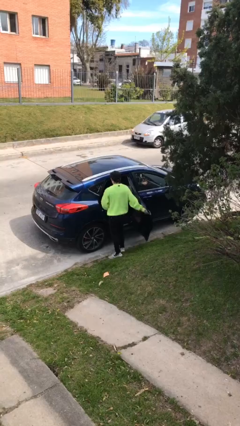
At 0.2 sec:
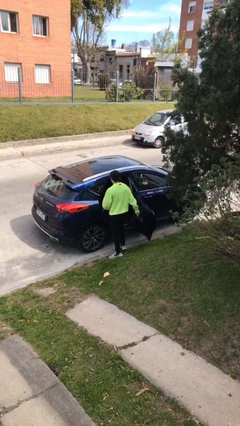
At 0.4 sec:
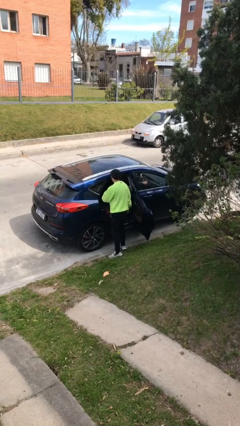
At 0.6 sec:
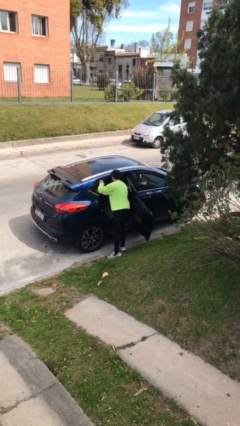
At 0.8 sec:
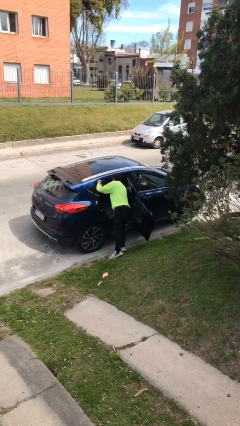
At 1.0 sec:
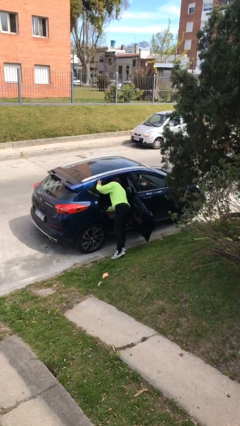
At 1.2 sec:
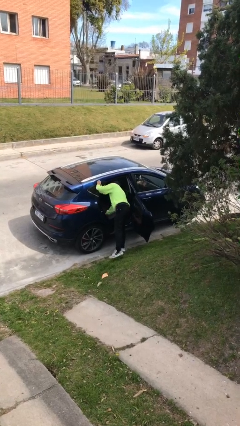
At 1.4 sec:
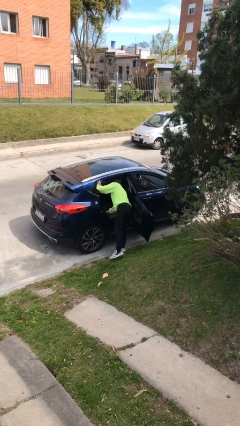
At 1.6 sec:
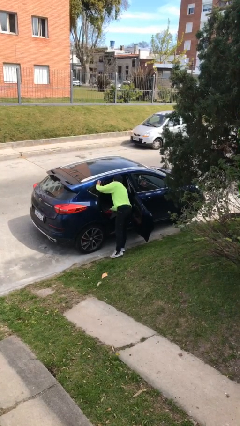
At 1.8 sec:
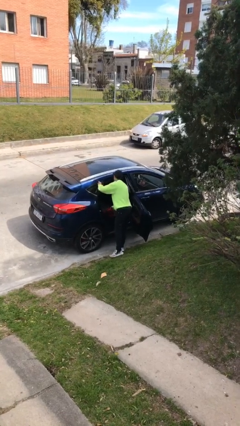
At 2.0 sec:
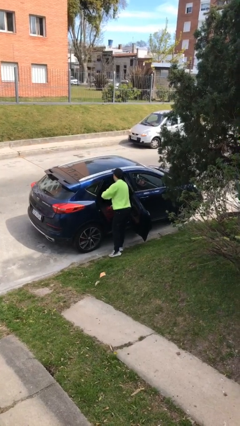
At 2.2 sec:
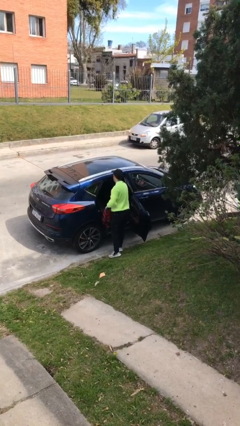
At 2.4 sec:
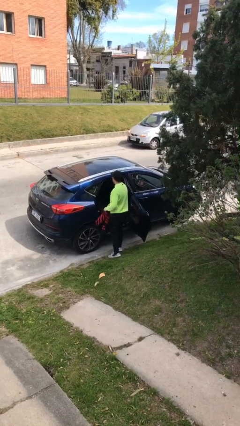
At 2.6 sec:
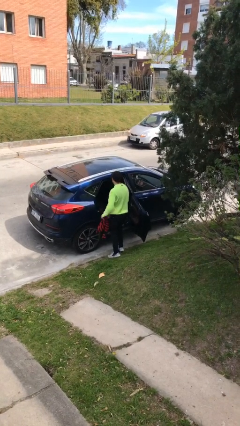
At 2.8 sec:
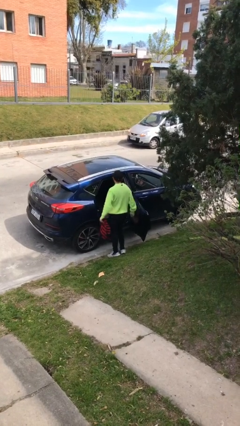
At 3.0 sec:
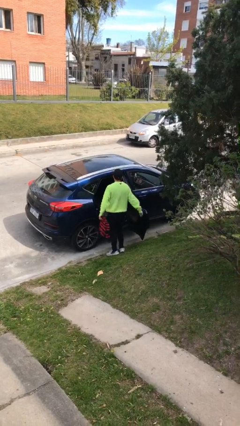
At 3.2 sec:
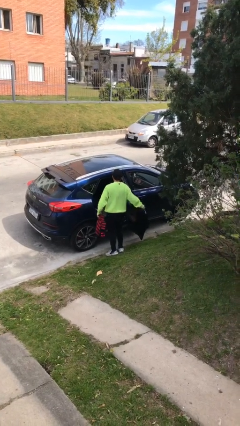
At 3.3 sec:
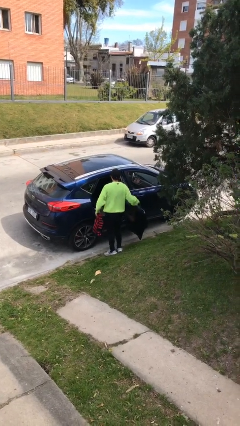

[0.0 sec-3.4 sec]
person unloads car

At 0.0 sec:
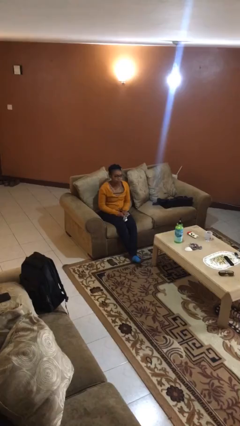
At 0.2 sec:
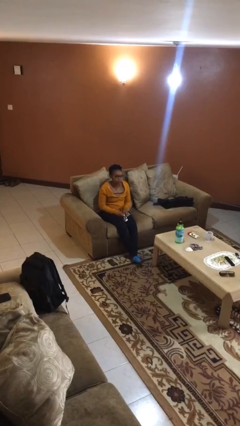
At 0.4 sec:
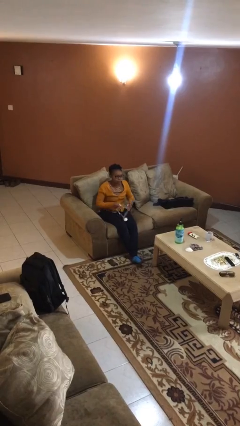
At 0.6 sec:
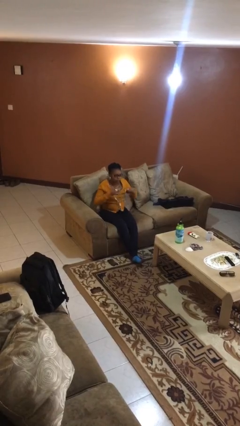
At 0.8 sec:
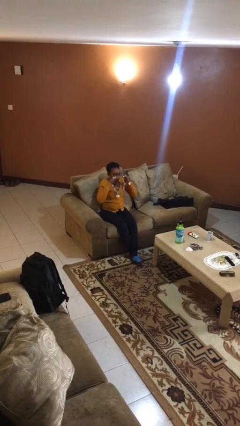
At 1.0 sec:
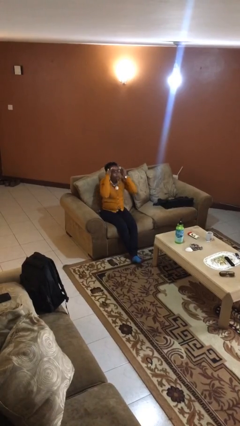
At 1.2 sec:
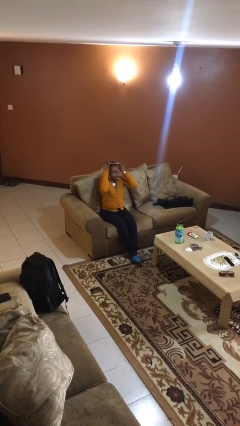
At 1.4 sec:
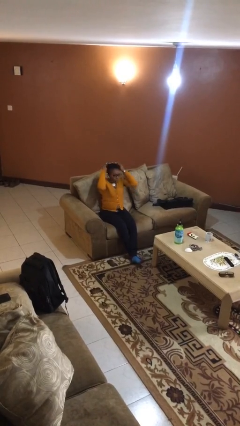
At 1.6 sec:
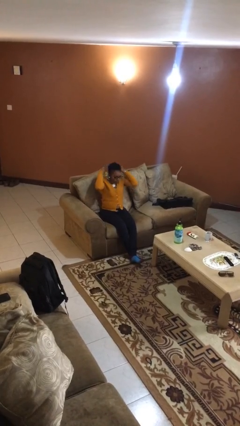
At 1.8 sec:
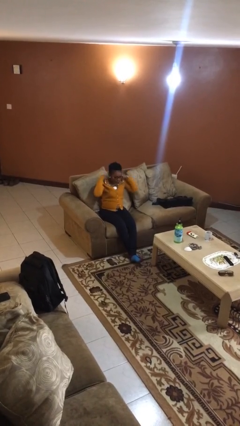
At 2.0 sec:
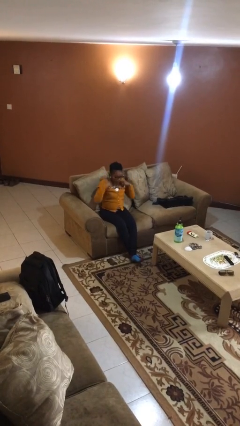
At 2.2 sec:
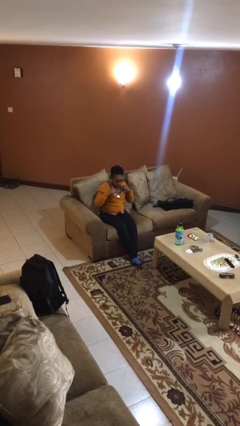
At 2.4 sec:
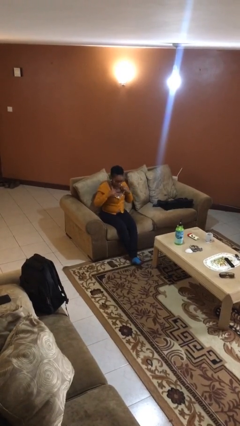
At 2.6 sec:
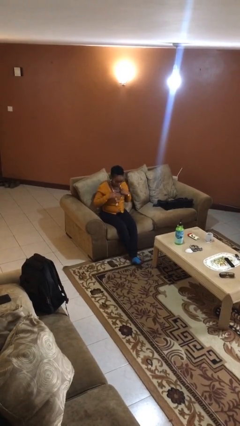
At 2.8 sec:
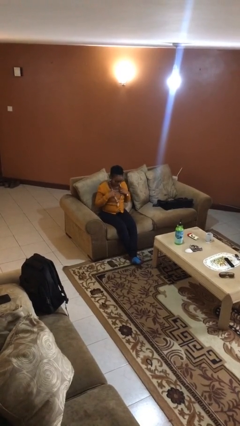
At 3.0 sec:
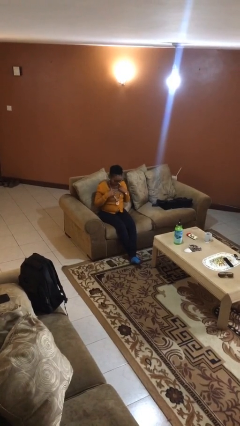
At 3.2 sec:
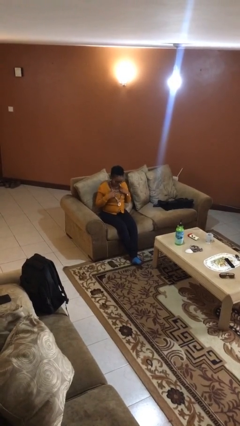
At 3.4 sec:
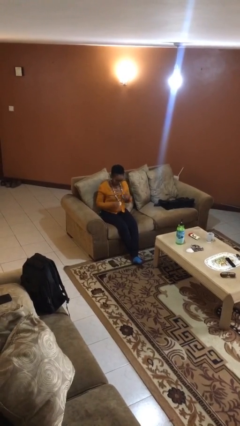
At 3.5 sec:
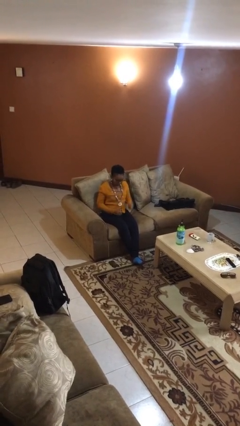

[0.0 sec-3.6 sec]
person puts on necklace

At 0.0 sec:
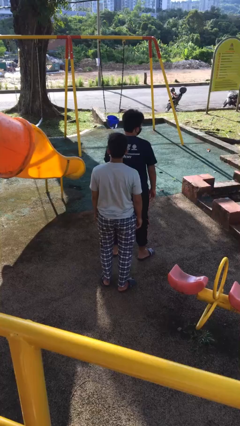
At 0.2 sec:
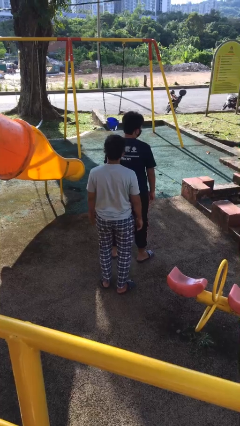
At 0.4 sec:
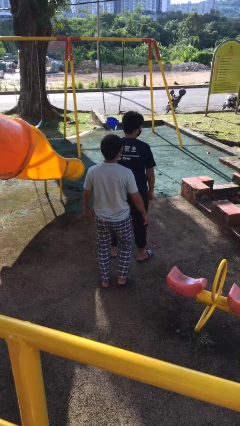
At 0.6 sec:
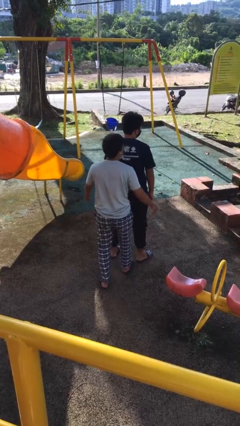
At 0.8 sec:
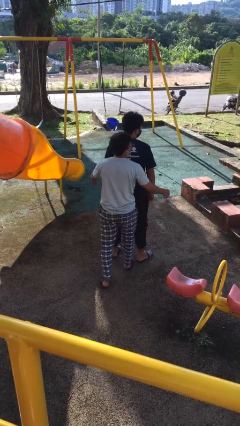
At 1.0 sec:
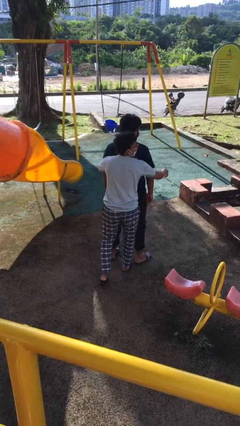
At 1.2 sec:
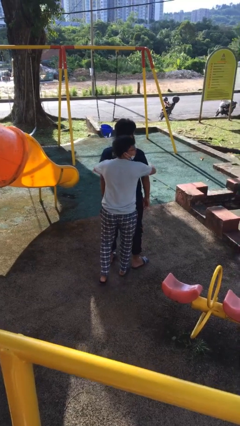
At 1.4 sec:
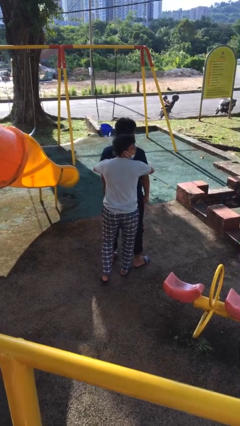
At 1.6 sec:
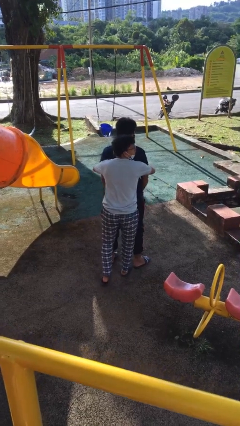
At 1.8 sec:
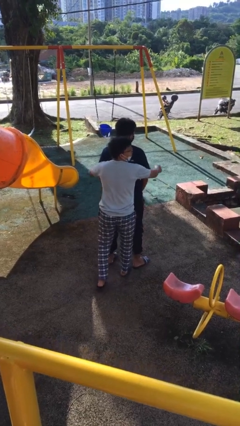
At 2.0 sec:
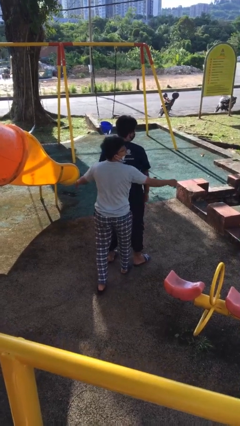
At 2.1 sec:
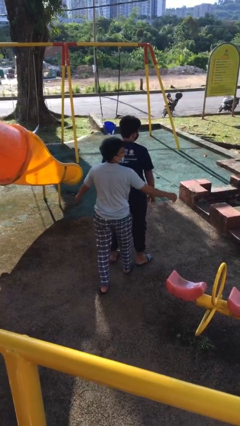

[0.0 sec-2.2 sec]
person hugs person from behind

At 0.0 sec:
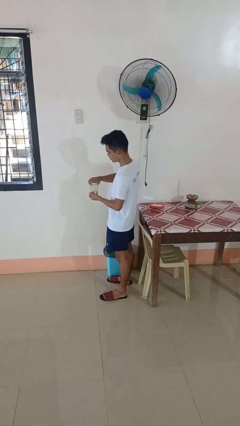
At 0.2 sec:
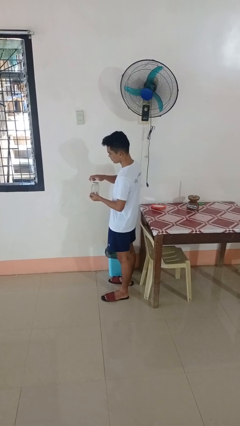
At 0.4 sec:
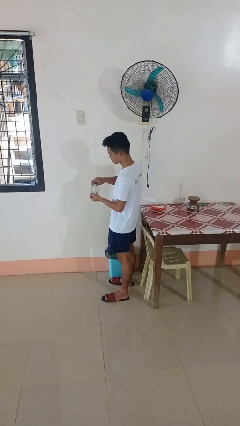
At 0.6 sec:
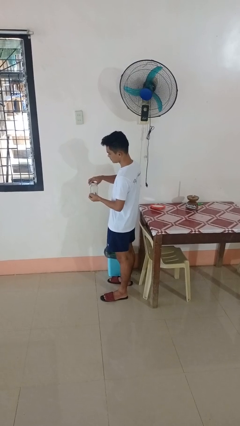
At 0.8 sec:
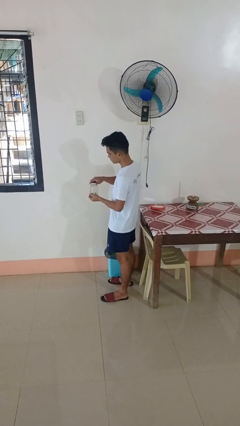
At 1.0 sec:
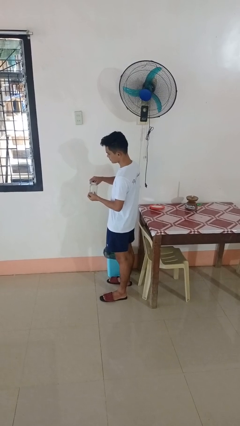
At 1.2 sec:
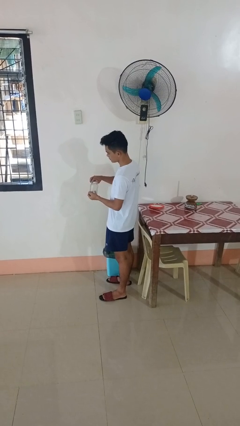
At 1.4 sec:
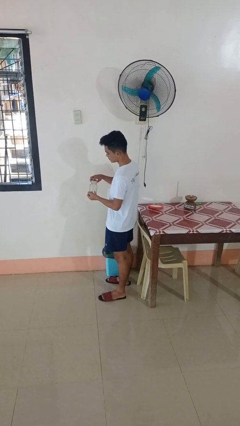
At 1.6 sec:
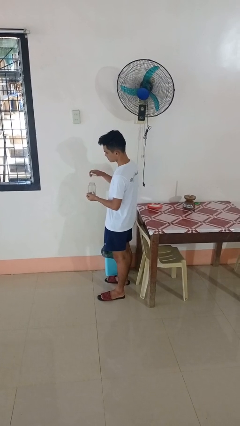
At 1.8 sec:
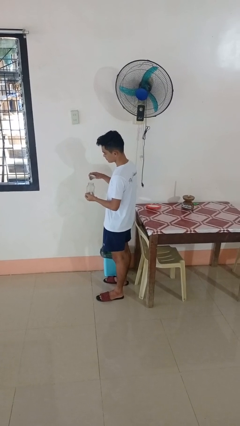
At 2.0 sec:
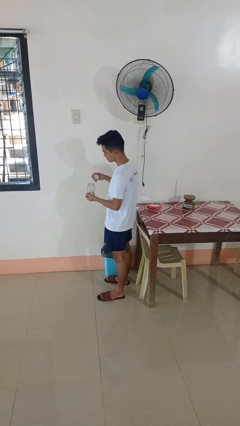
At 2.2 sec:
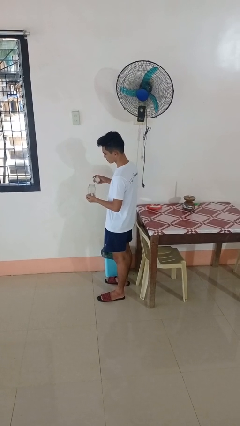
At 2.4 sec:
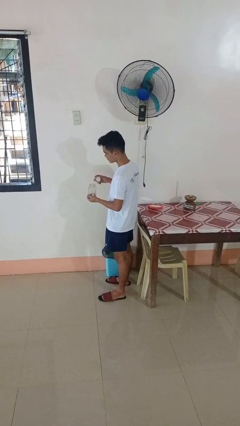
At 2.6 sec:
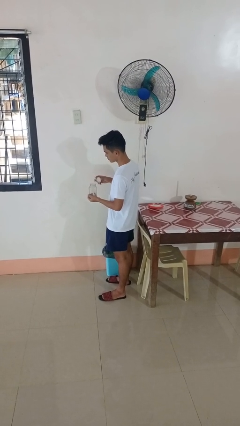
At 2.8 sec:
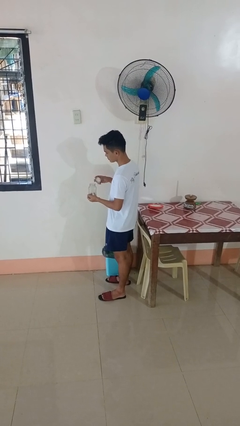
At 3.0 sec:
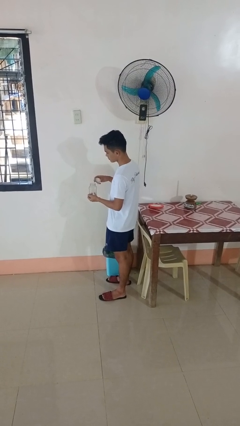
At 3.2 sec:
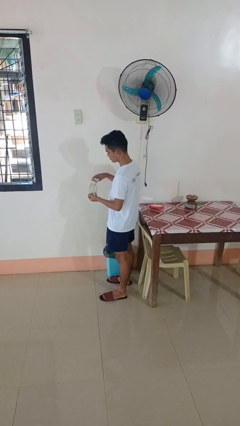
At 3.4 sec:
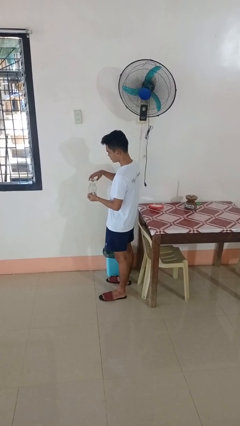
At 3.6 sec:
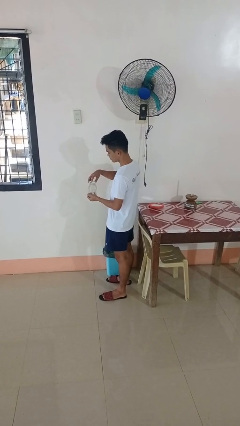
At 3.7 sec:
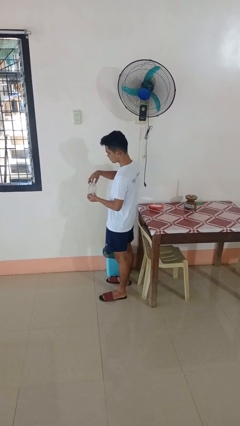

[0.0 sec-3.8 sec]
person opens jar

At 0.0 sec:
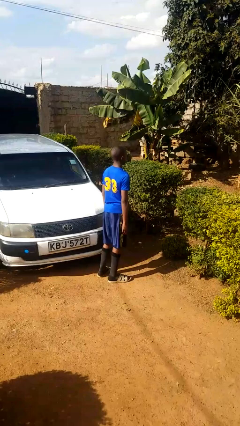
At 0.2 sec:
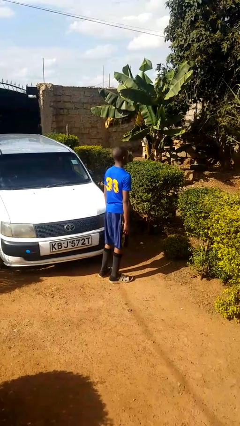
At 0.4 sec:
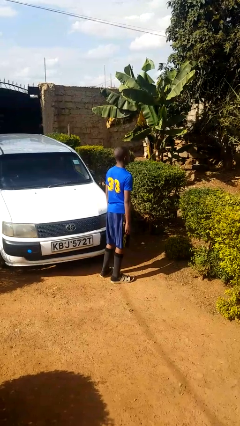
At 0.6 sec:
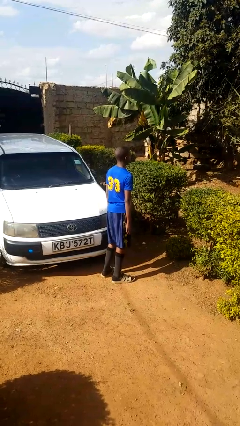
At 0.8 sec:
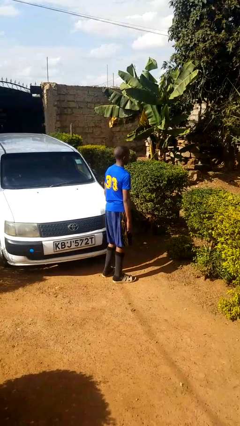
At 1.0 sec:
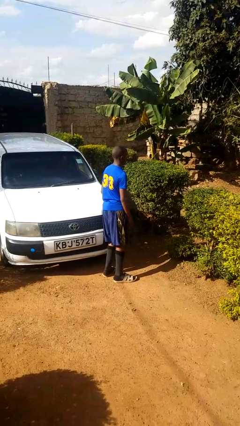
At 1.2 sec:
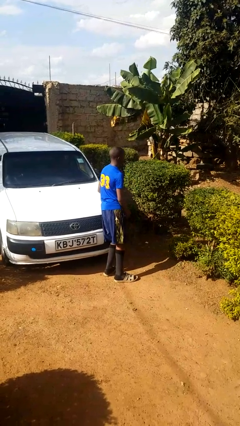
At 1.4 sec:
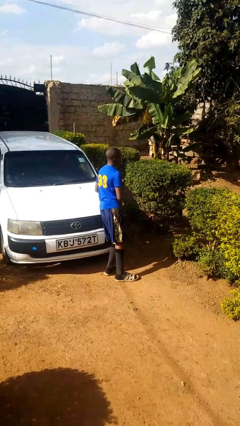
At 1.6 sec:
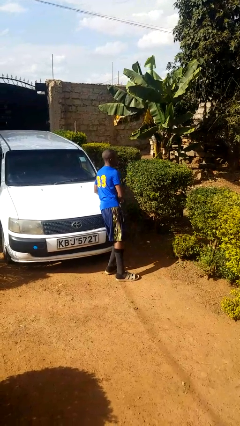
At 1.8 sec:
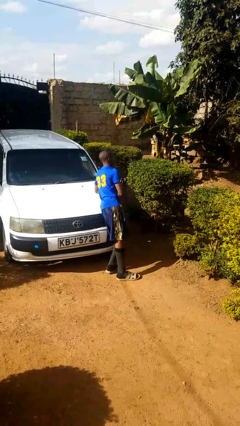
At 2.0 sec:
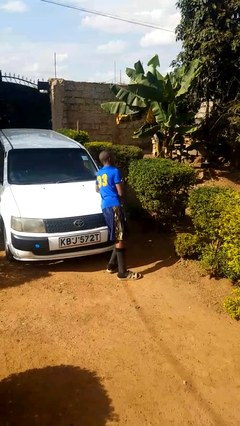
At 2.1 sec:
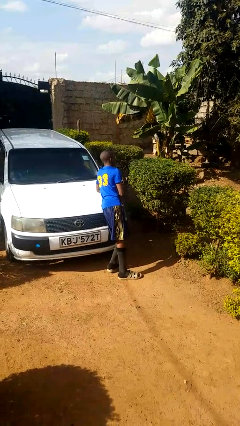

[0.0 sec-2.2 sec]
person leans against car

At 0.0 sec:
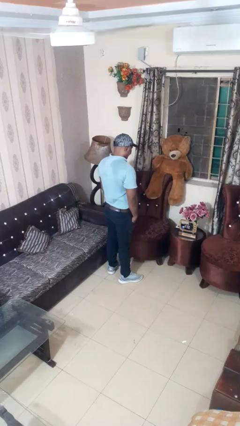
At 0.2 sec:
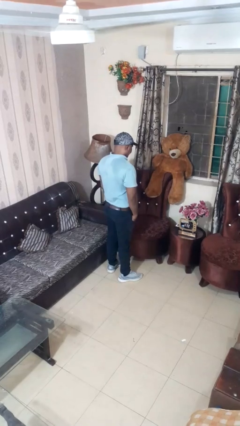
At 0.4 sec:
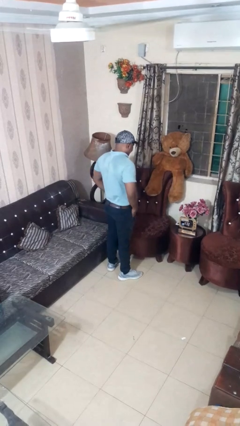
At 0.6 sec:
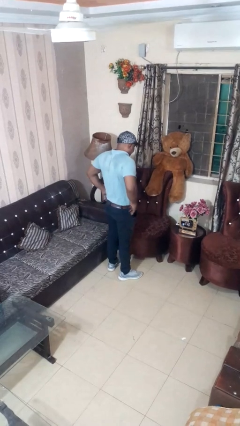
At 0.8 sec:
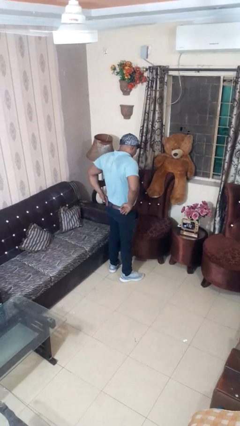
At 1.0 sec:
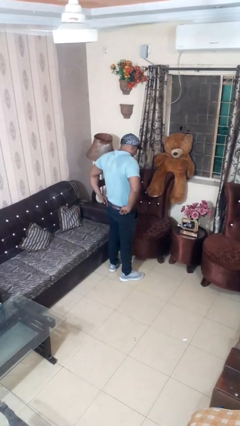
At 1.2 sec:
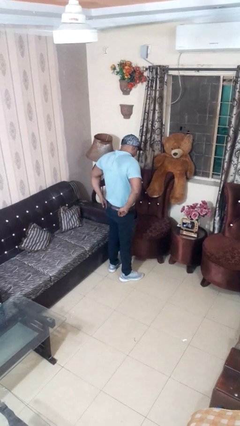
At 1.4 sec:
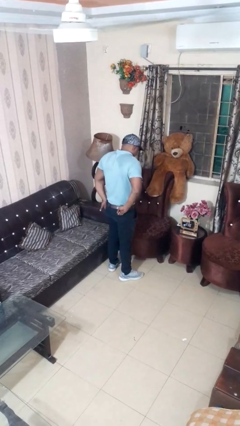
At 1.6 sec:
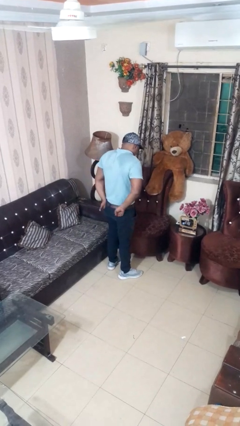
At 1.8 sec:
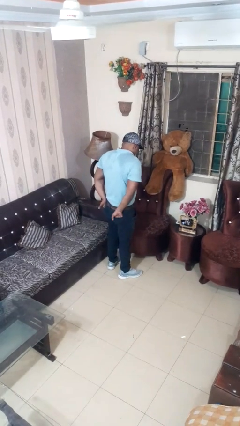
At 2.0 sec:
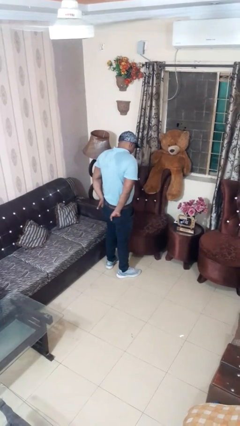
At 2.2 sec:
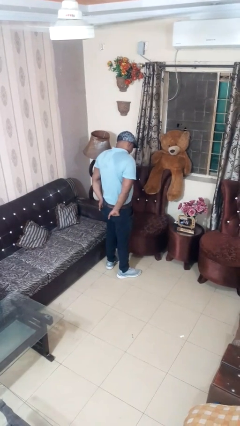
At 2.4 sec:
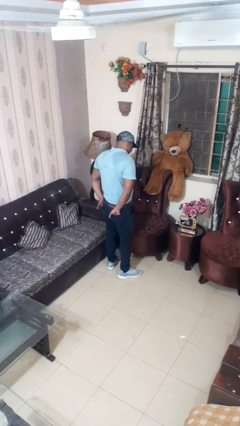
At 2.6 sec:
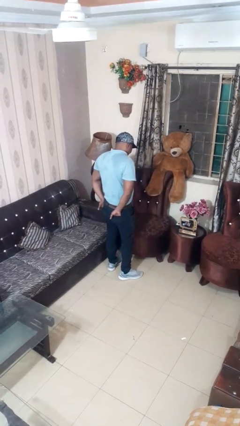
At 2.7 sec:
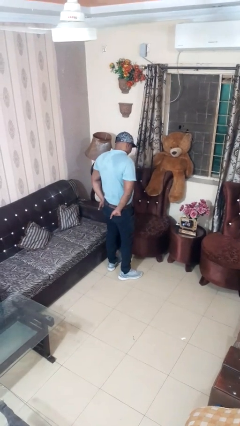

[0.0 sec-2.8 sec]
person puts hands in back pockets
